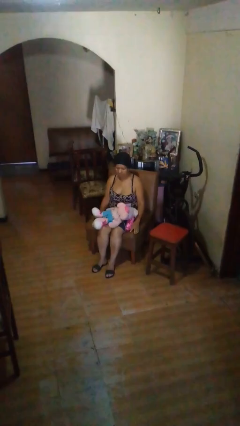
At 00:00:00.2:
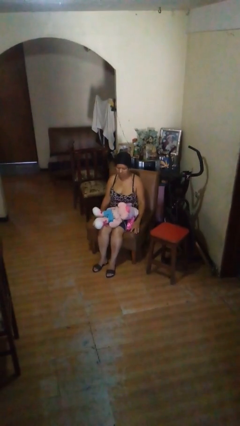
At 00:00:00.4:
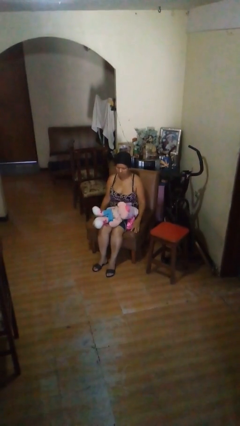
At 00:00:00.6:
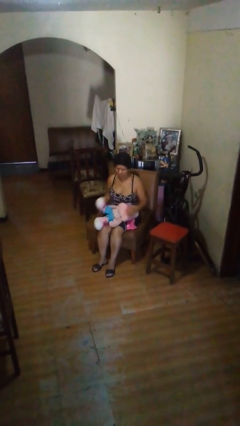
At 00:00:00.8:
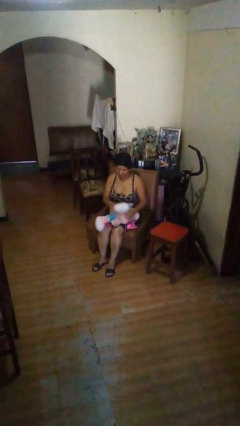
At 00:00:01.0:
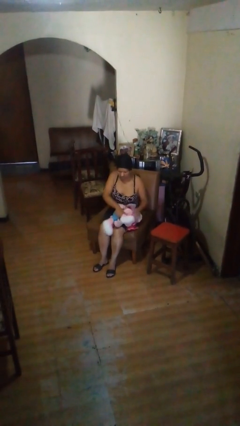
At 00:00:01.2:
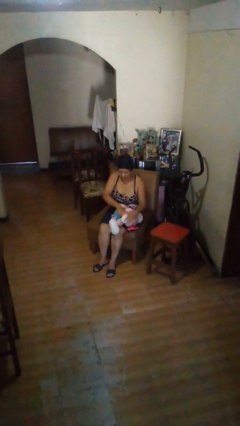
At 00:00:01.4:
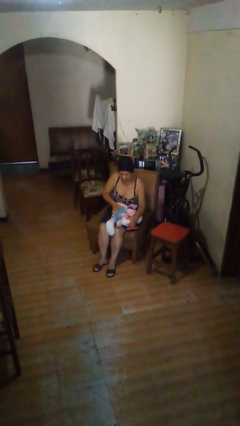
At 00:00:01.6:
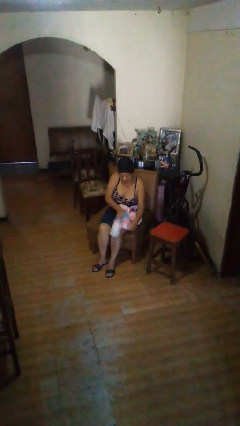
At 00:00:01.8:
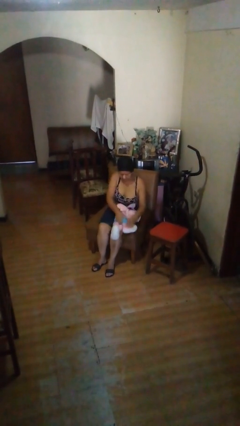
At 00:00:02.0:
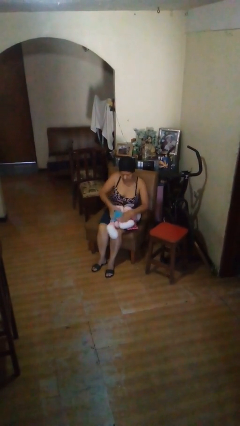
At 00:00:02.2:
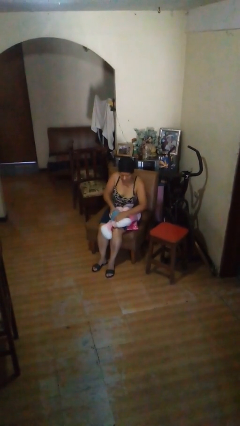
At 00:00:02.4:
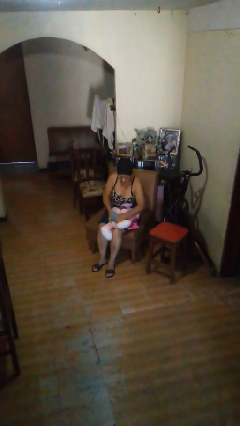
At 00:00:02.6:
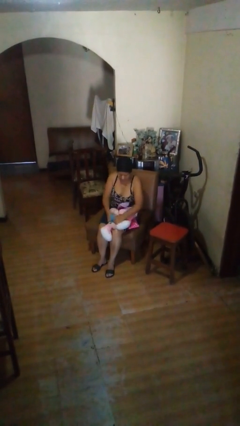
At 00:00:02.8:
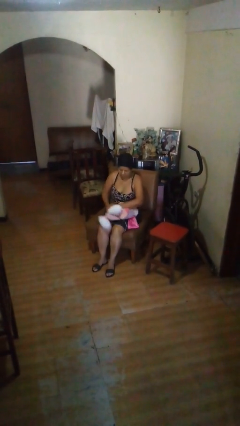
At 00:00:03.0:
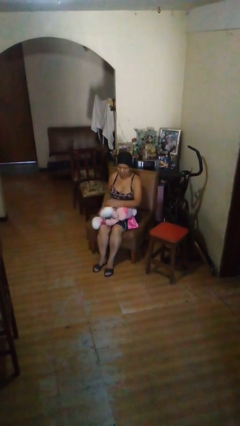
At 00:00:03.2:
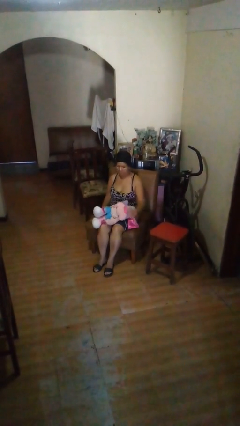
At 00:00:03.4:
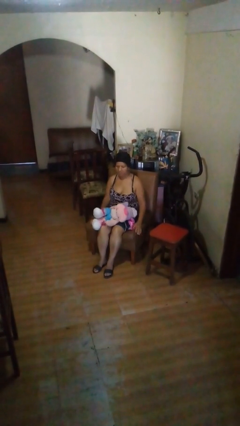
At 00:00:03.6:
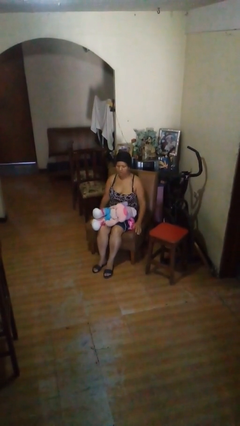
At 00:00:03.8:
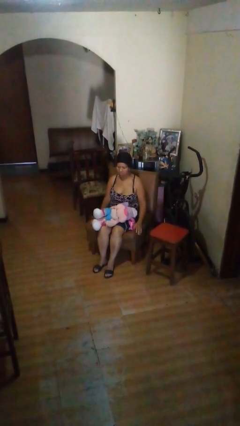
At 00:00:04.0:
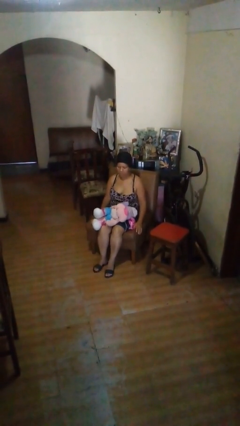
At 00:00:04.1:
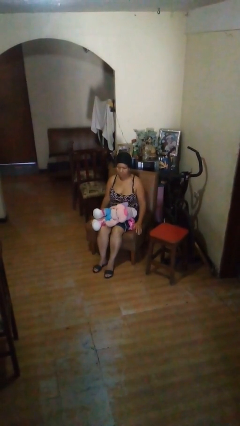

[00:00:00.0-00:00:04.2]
person squeezes object

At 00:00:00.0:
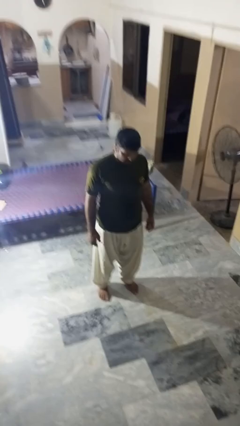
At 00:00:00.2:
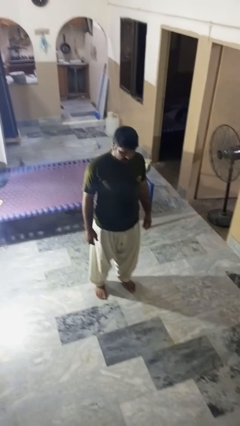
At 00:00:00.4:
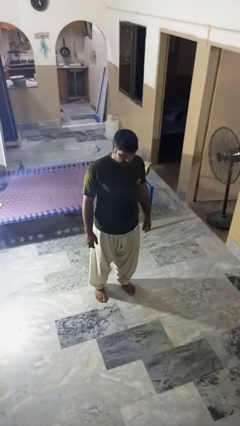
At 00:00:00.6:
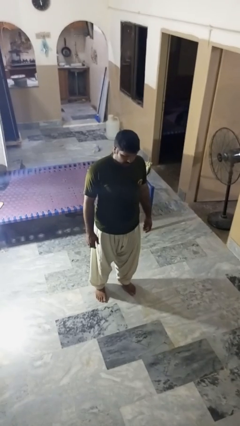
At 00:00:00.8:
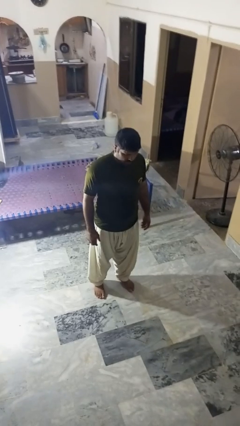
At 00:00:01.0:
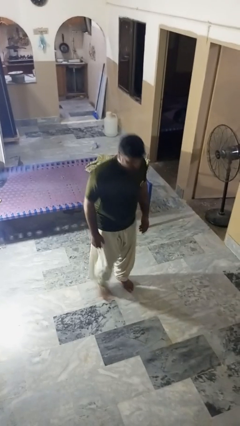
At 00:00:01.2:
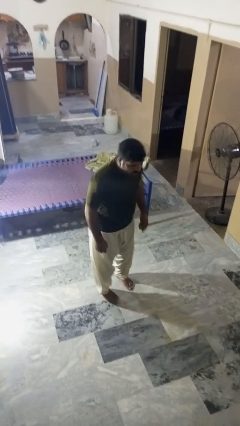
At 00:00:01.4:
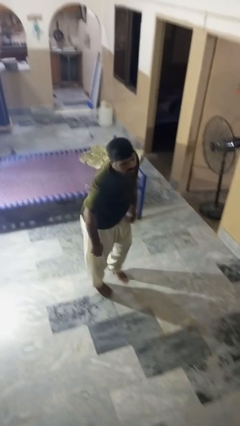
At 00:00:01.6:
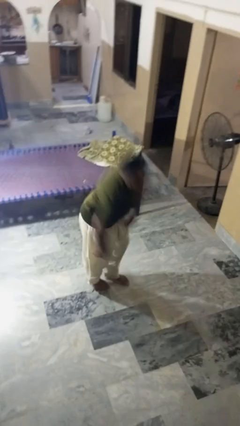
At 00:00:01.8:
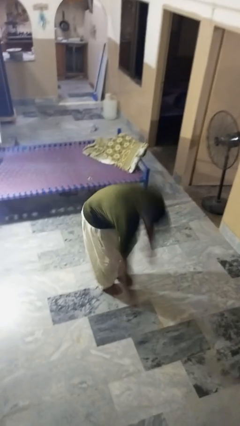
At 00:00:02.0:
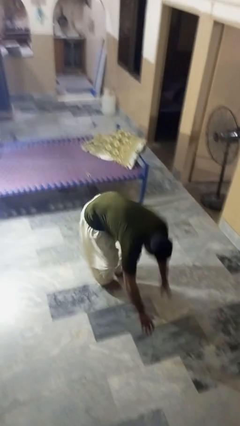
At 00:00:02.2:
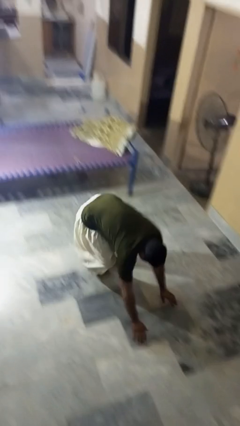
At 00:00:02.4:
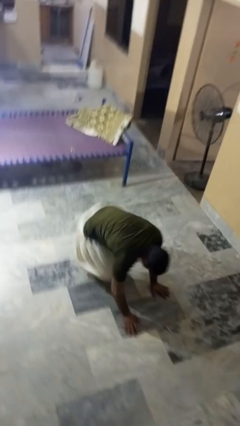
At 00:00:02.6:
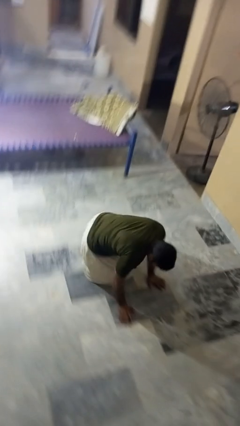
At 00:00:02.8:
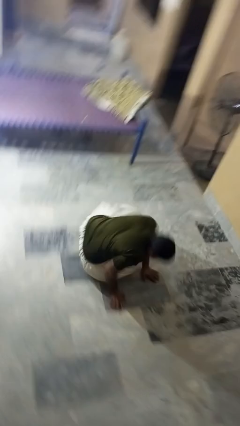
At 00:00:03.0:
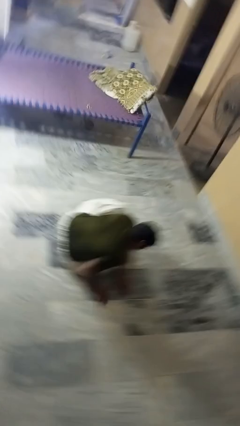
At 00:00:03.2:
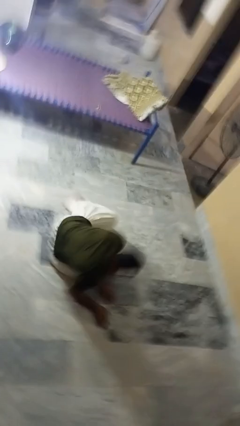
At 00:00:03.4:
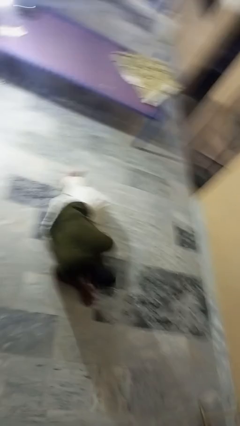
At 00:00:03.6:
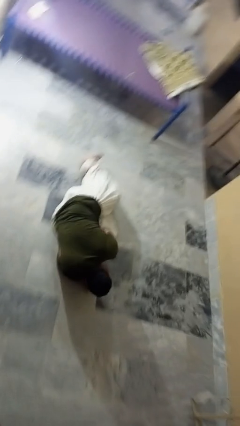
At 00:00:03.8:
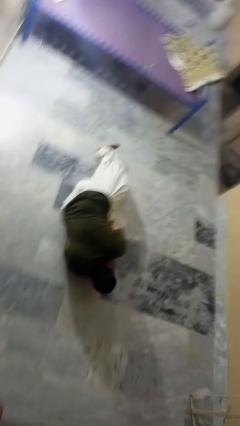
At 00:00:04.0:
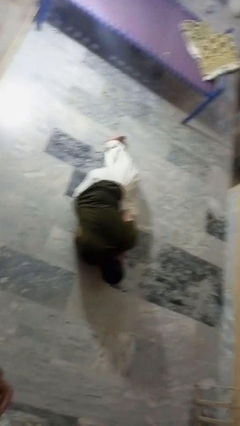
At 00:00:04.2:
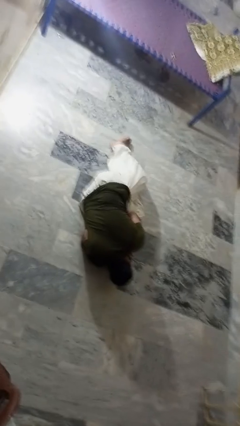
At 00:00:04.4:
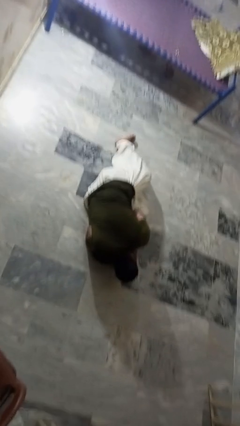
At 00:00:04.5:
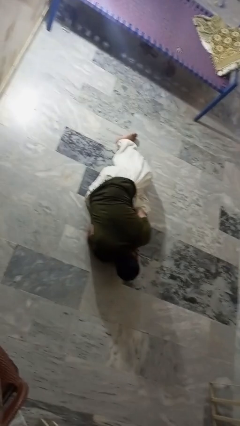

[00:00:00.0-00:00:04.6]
person falls while standing

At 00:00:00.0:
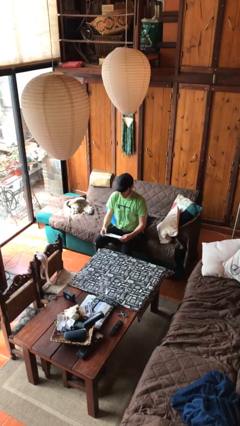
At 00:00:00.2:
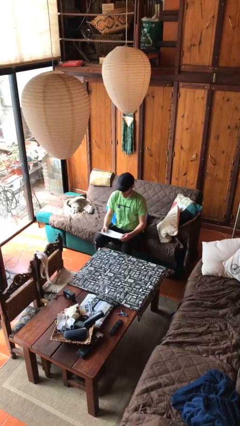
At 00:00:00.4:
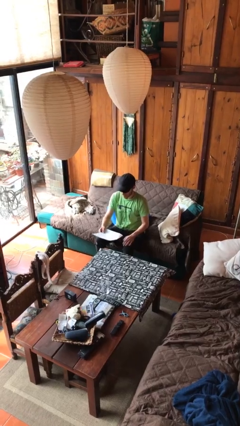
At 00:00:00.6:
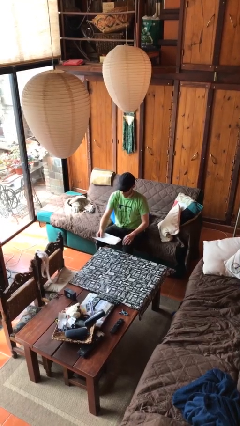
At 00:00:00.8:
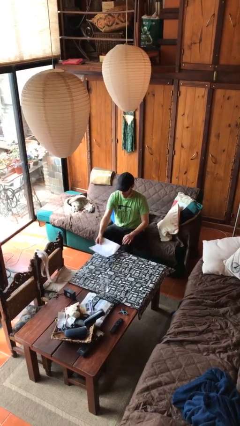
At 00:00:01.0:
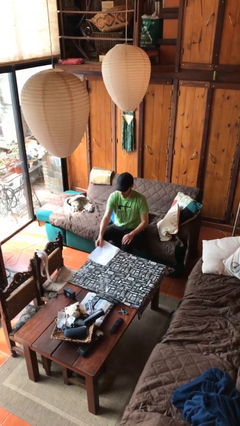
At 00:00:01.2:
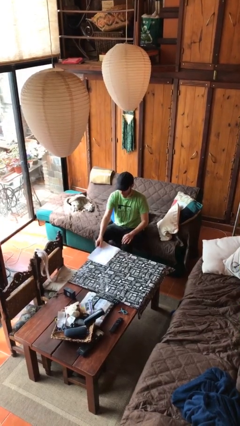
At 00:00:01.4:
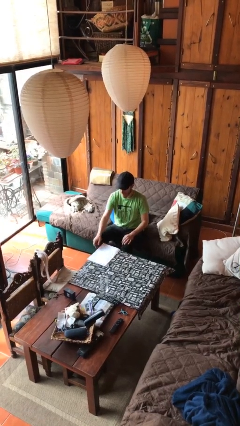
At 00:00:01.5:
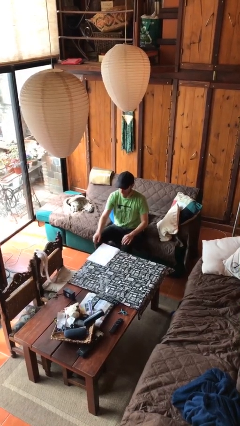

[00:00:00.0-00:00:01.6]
person puts down object on table

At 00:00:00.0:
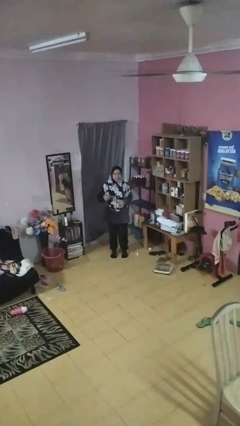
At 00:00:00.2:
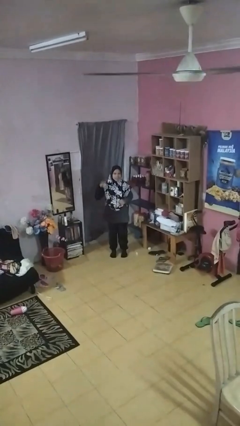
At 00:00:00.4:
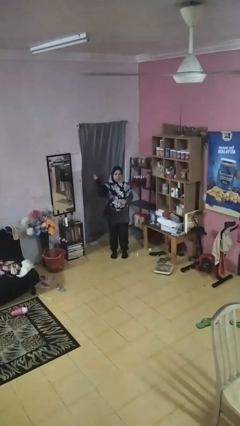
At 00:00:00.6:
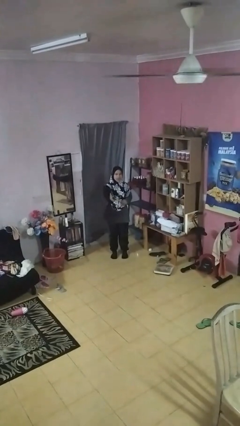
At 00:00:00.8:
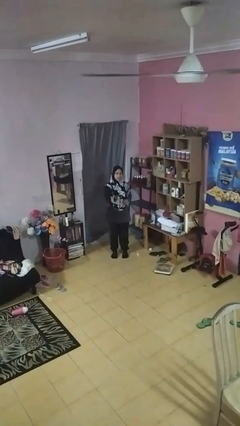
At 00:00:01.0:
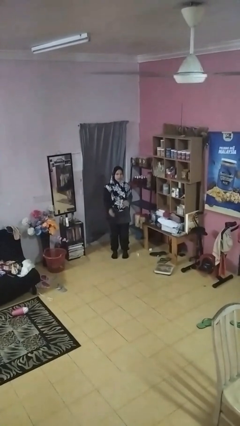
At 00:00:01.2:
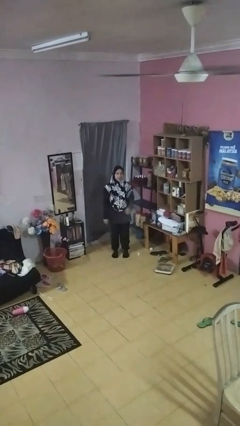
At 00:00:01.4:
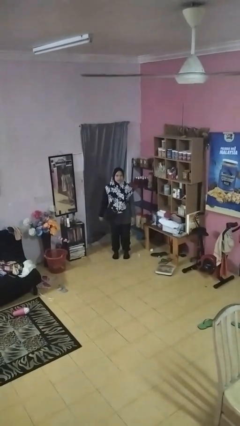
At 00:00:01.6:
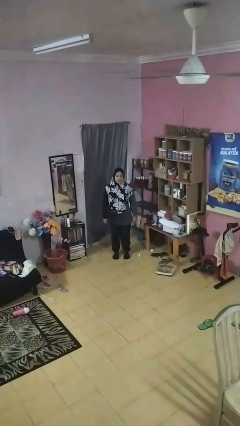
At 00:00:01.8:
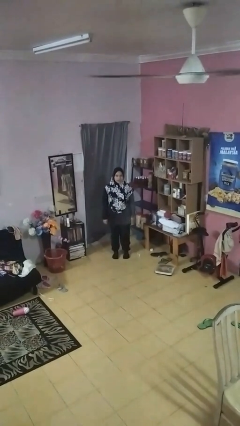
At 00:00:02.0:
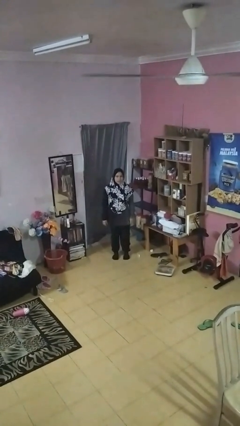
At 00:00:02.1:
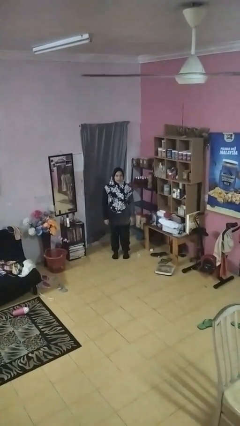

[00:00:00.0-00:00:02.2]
person karate chop

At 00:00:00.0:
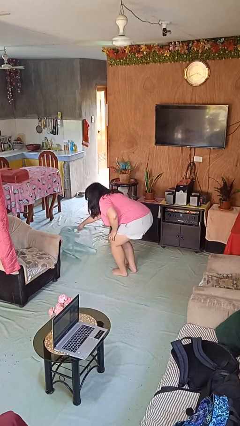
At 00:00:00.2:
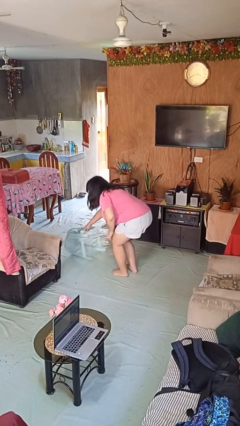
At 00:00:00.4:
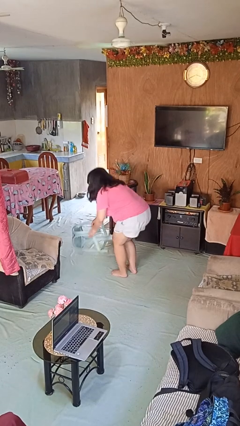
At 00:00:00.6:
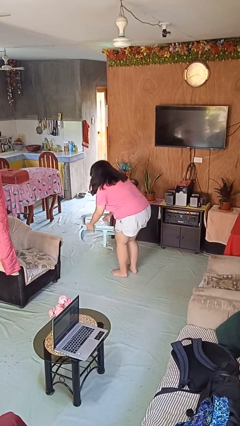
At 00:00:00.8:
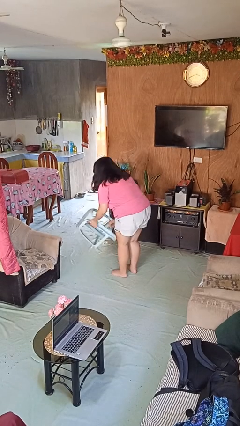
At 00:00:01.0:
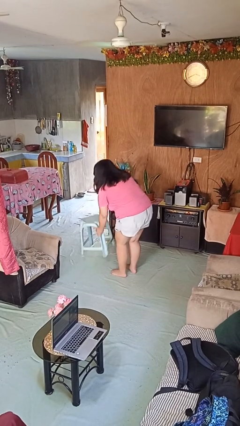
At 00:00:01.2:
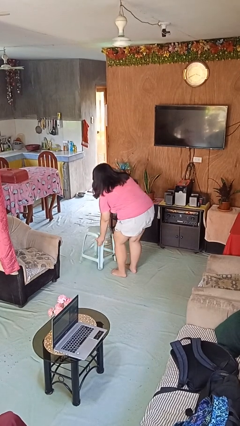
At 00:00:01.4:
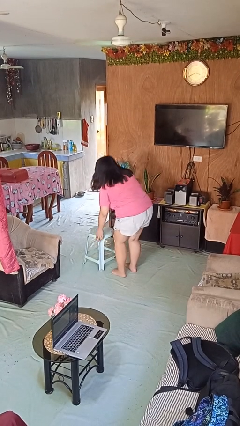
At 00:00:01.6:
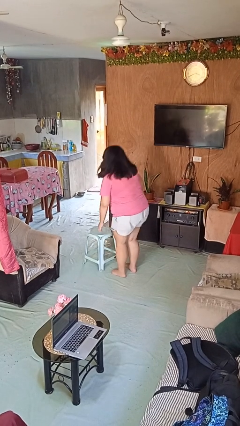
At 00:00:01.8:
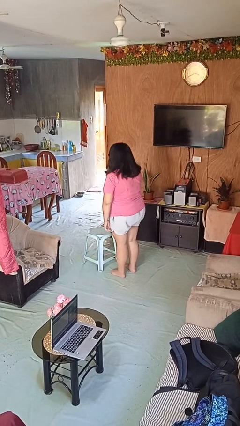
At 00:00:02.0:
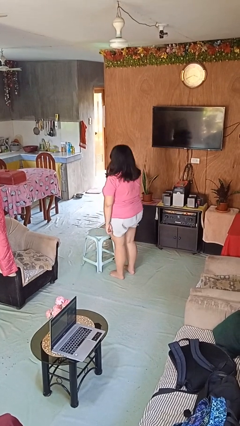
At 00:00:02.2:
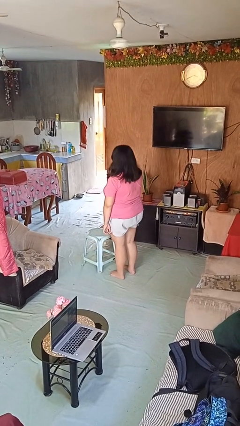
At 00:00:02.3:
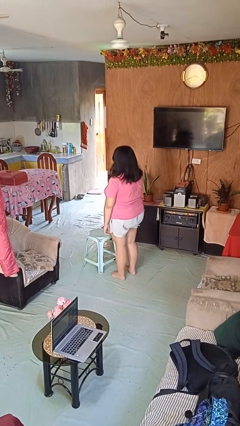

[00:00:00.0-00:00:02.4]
person sets upright furniture

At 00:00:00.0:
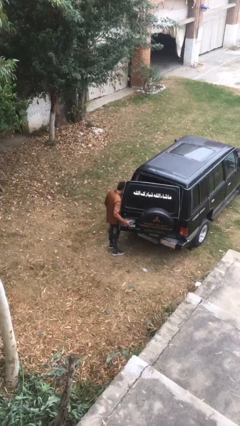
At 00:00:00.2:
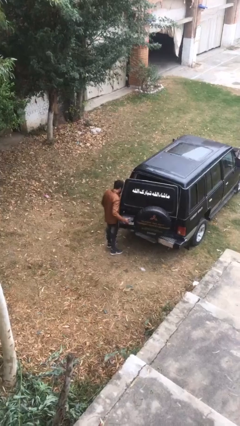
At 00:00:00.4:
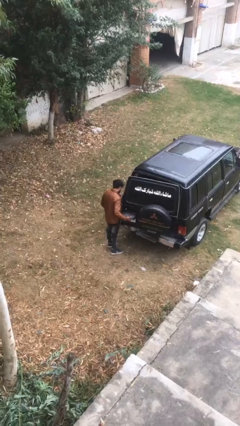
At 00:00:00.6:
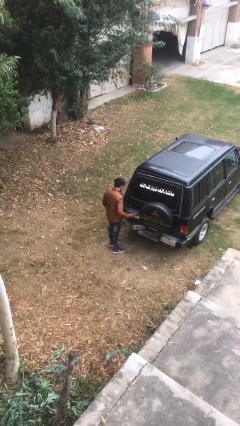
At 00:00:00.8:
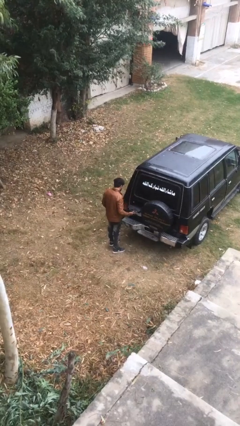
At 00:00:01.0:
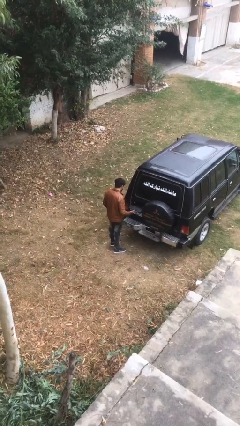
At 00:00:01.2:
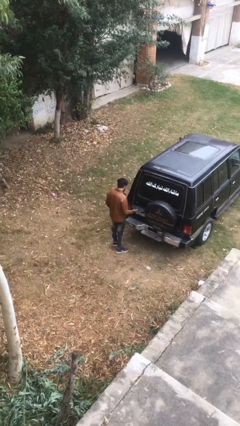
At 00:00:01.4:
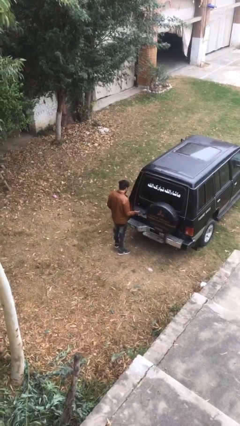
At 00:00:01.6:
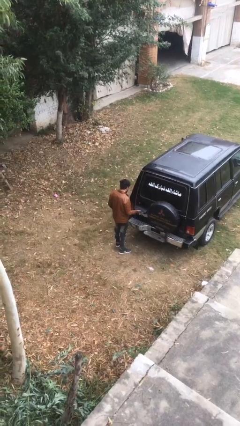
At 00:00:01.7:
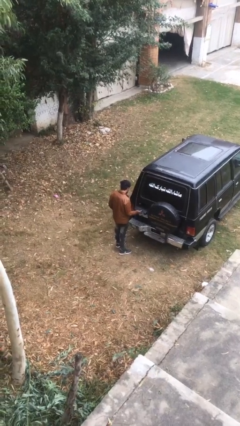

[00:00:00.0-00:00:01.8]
person closes car trunk

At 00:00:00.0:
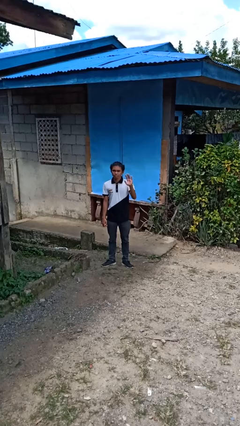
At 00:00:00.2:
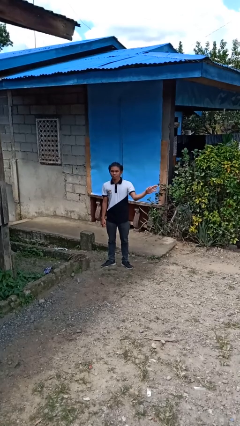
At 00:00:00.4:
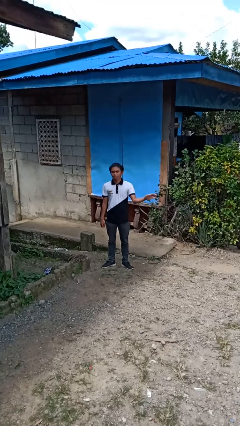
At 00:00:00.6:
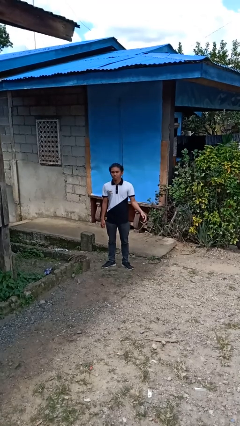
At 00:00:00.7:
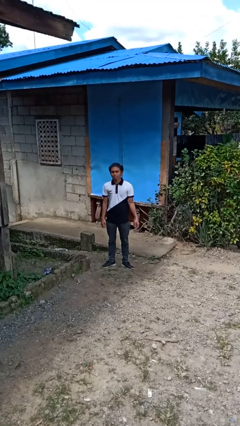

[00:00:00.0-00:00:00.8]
person gestures swipe left
